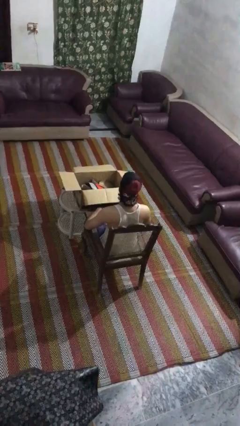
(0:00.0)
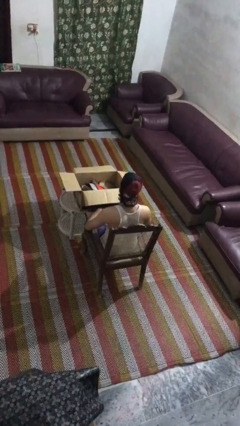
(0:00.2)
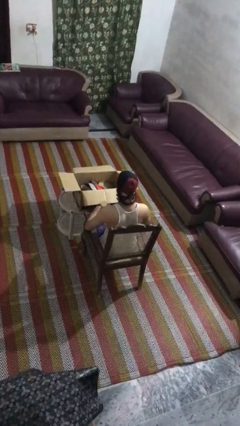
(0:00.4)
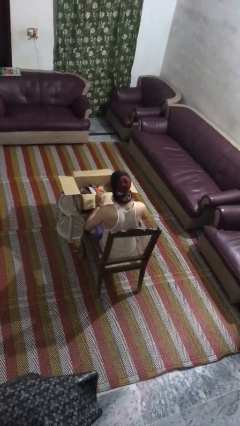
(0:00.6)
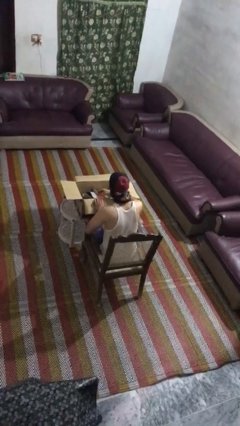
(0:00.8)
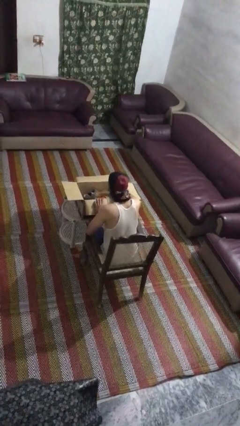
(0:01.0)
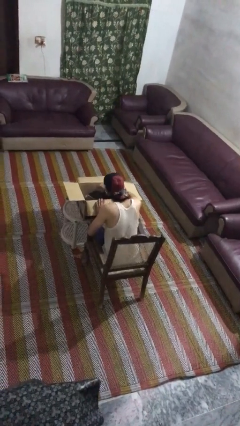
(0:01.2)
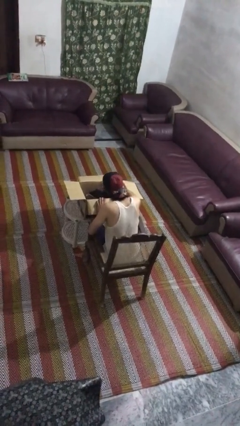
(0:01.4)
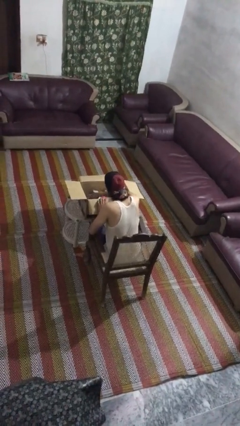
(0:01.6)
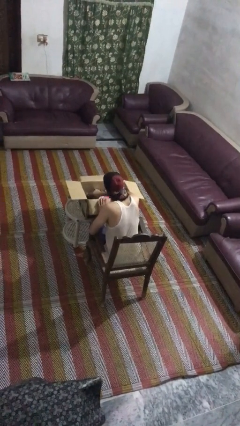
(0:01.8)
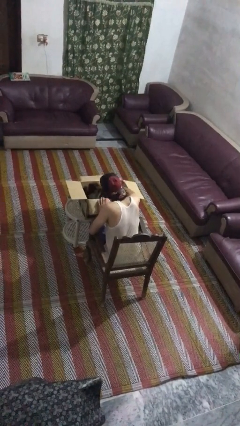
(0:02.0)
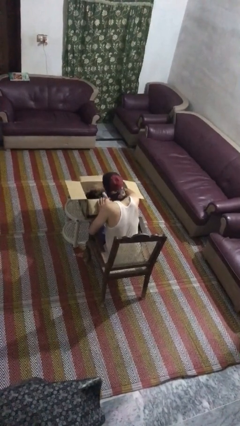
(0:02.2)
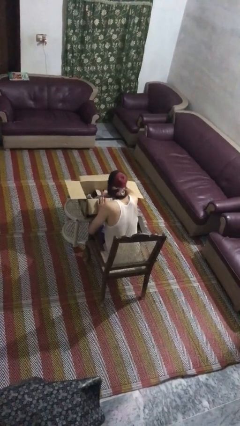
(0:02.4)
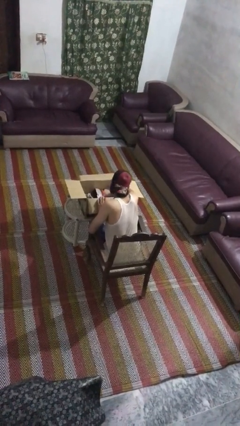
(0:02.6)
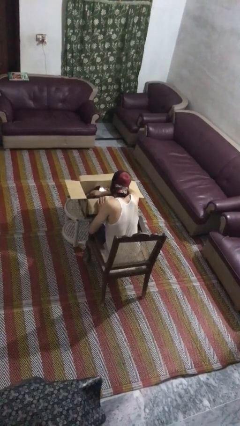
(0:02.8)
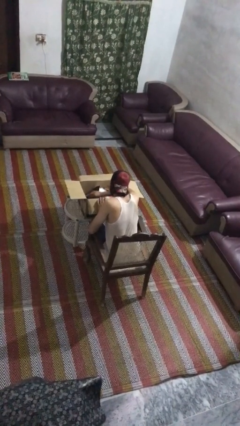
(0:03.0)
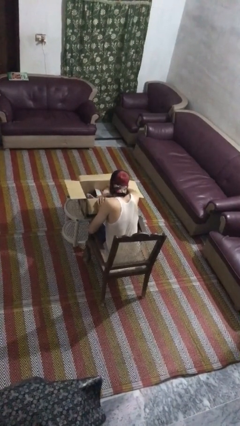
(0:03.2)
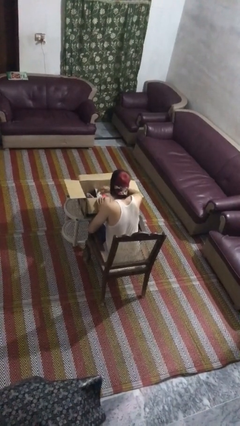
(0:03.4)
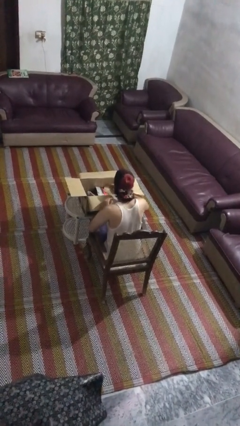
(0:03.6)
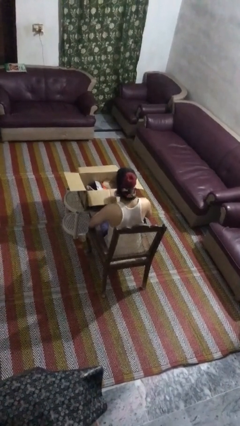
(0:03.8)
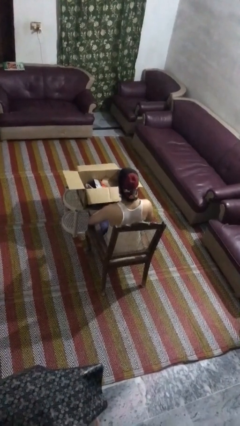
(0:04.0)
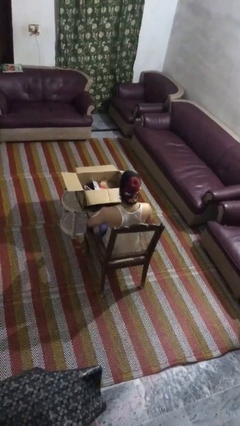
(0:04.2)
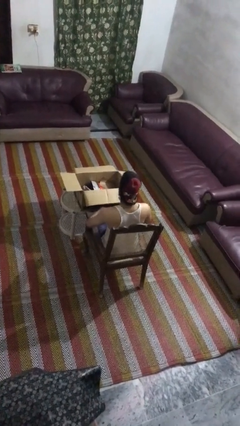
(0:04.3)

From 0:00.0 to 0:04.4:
person searches in box

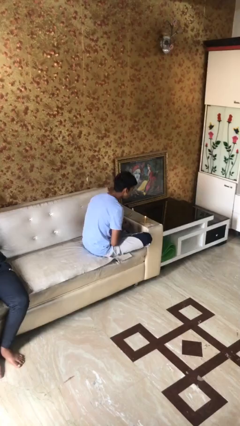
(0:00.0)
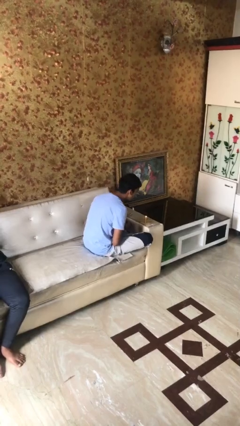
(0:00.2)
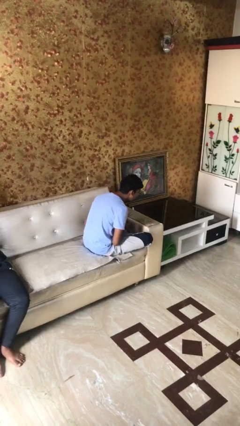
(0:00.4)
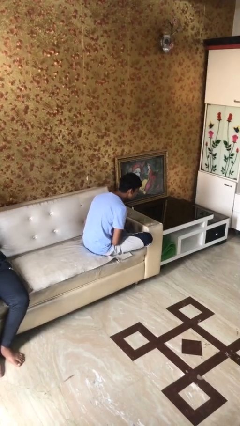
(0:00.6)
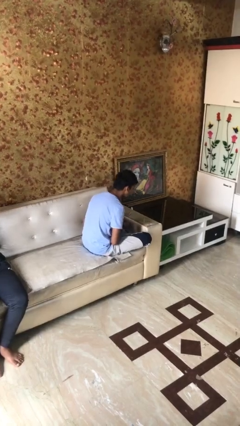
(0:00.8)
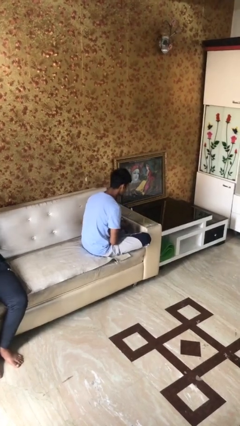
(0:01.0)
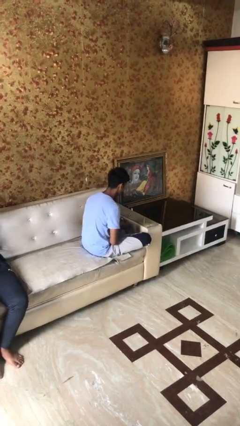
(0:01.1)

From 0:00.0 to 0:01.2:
person extinguishes candle

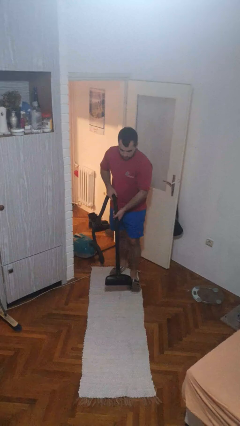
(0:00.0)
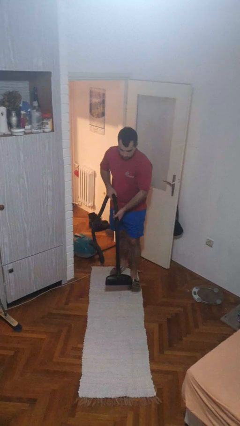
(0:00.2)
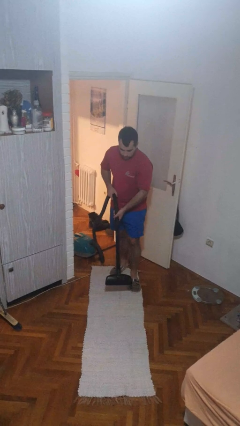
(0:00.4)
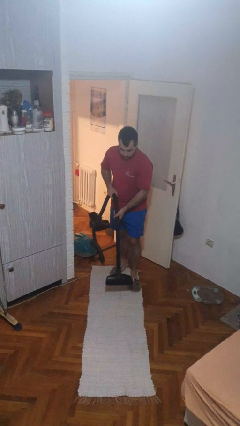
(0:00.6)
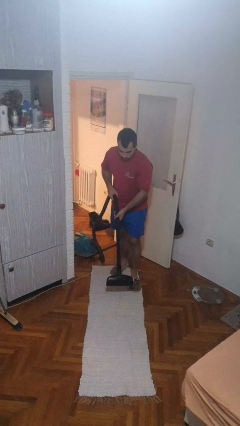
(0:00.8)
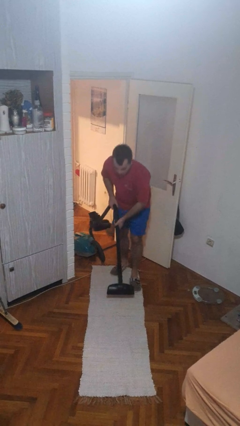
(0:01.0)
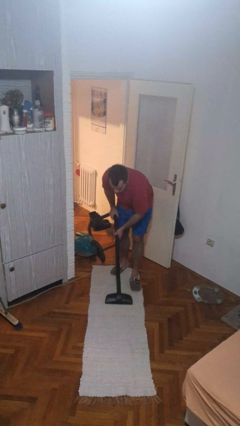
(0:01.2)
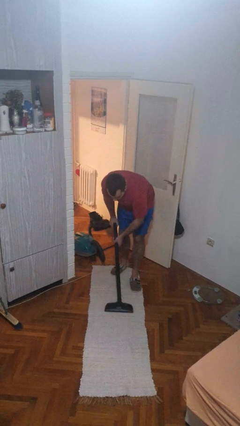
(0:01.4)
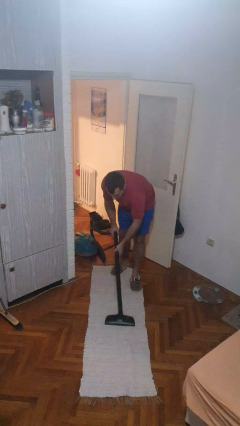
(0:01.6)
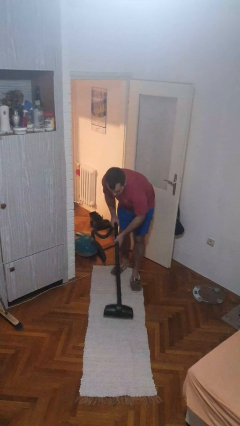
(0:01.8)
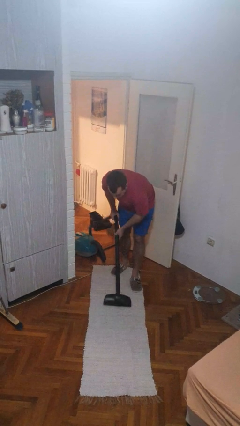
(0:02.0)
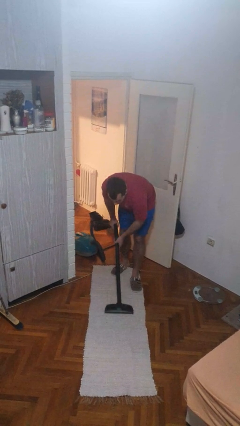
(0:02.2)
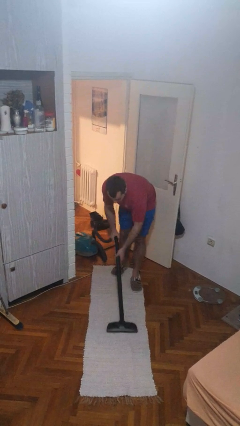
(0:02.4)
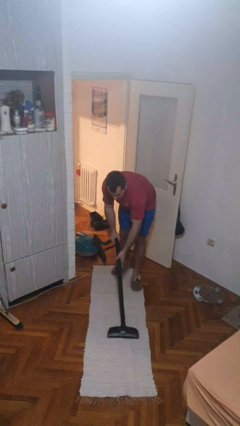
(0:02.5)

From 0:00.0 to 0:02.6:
person vacuums carpet

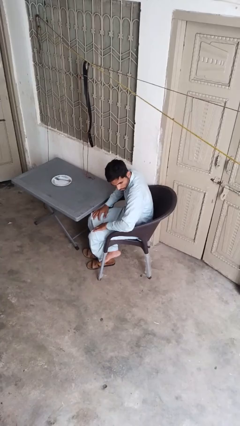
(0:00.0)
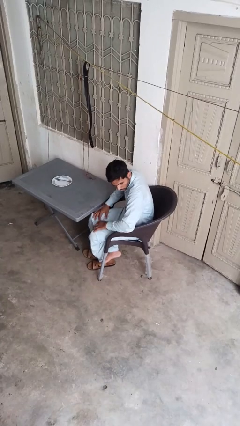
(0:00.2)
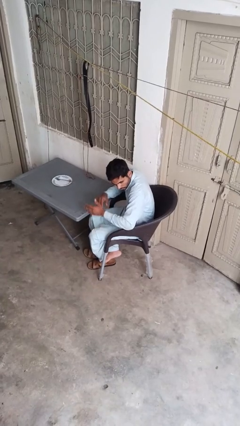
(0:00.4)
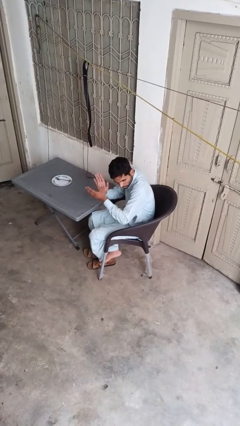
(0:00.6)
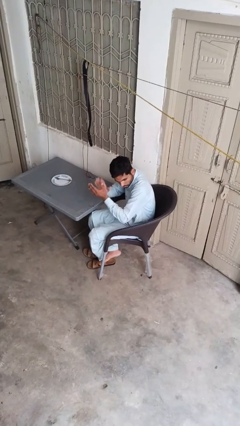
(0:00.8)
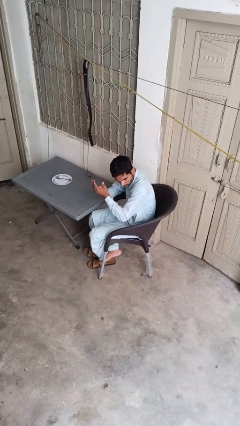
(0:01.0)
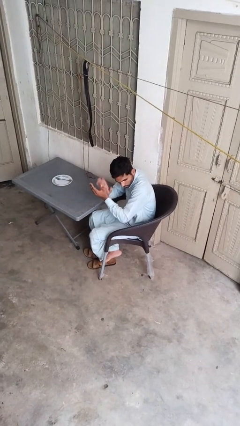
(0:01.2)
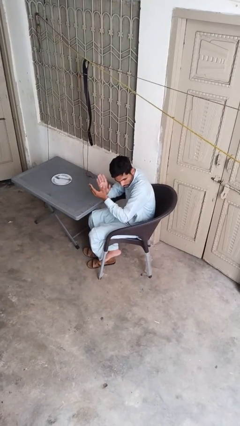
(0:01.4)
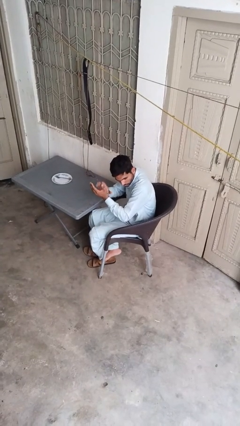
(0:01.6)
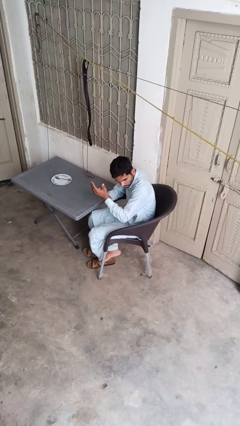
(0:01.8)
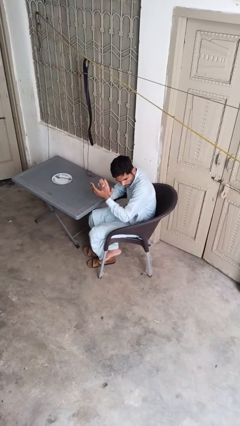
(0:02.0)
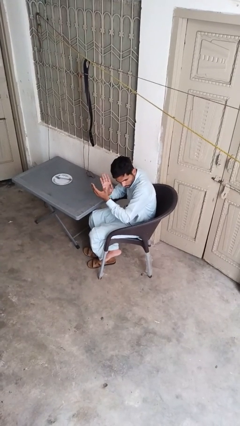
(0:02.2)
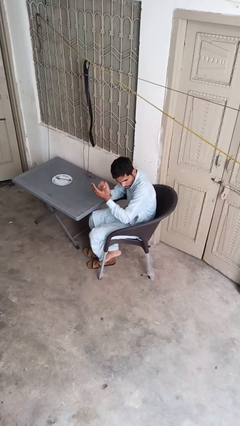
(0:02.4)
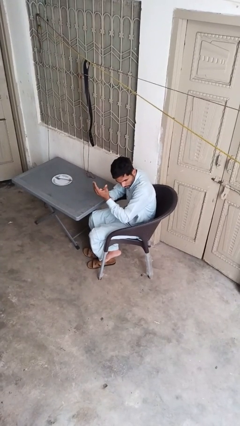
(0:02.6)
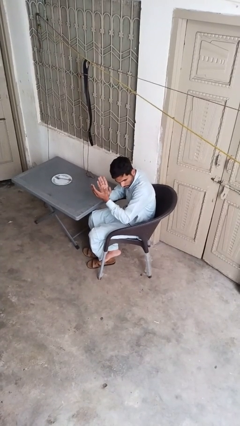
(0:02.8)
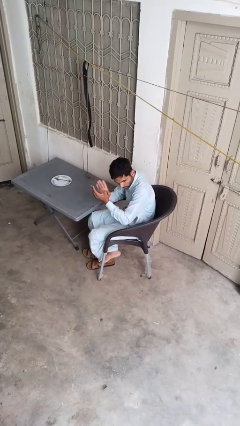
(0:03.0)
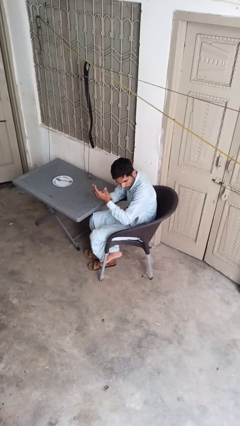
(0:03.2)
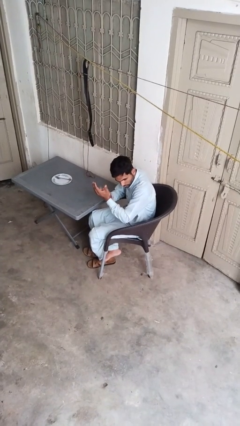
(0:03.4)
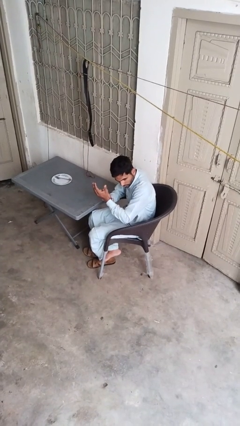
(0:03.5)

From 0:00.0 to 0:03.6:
person claps hands

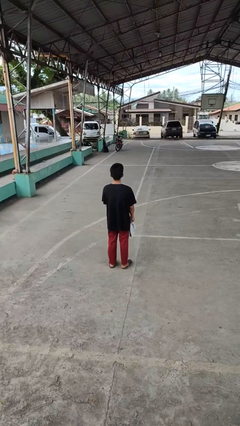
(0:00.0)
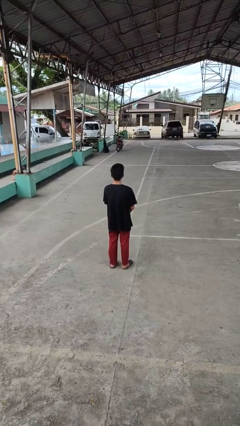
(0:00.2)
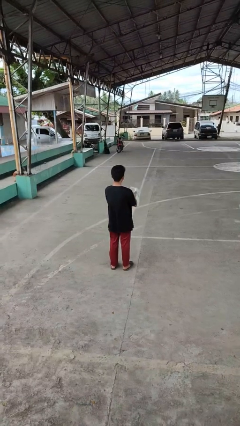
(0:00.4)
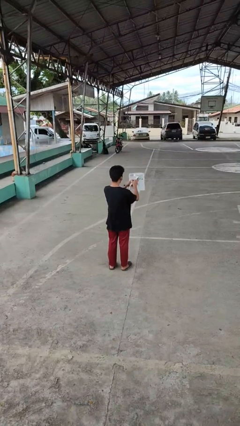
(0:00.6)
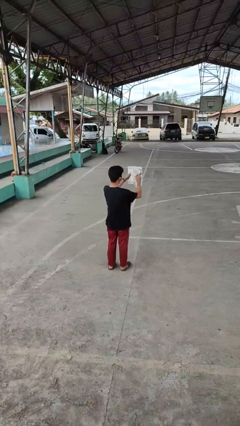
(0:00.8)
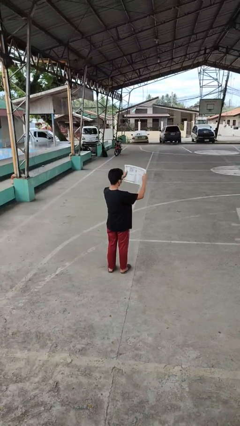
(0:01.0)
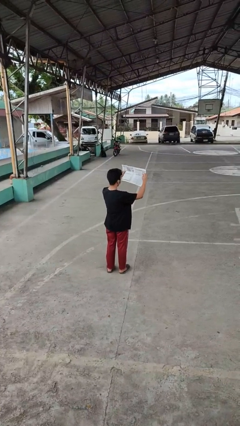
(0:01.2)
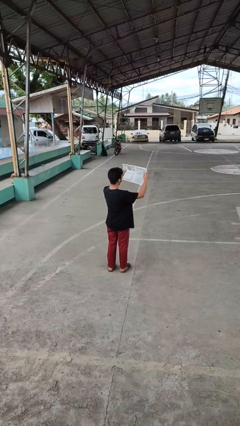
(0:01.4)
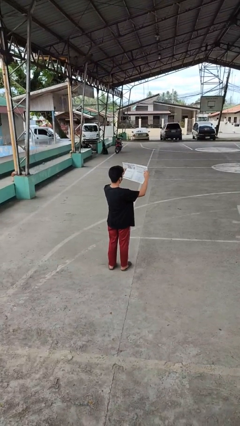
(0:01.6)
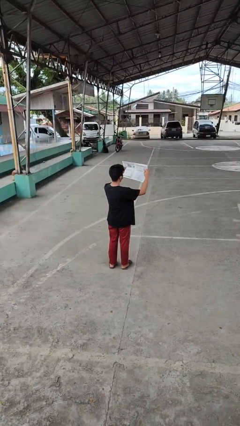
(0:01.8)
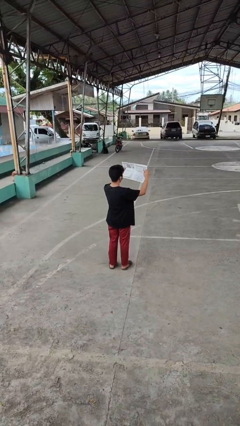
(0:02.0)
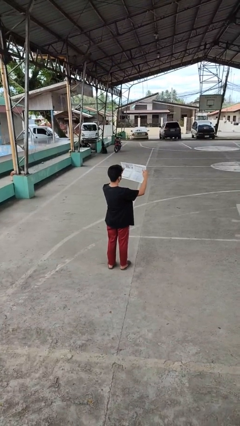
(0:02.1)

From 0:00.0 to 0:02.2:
person reads newspaper

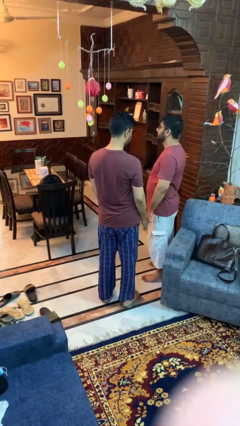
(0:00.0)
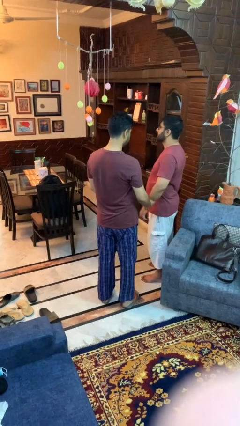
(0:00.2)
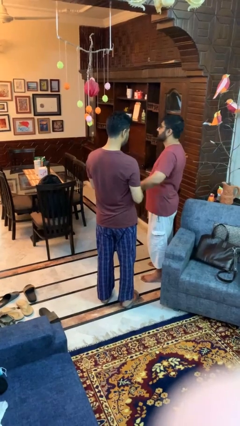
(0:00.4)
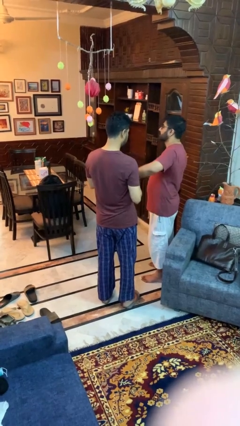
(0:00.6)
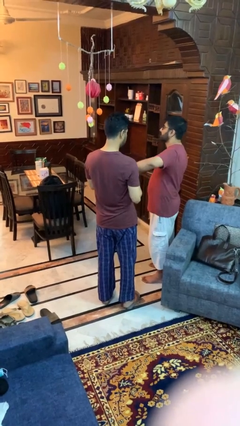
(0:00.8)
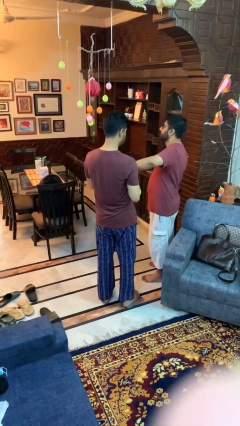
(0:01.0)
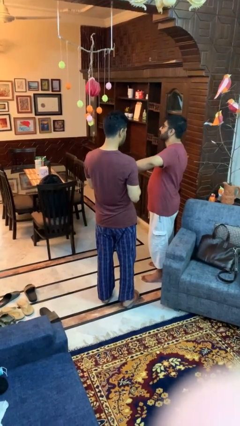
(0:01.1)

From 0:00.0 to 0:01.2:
person grabs person by forearm

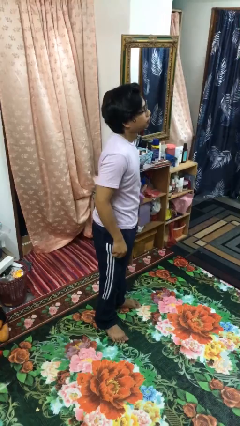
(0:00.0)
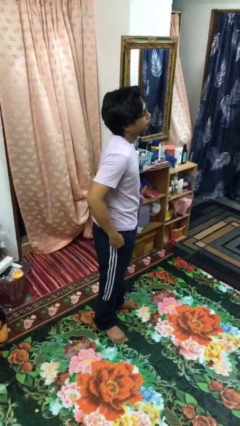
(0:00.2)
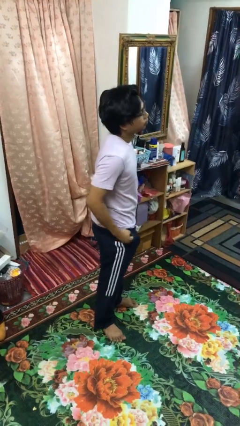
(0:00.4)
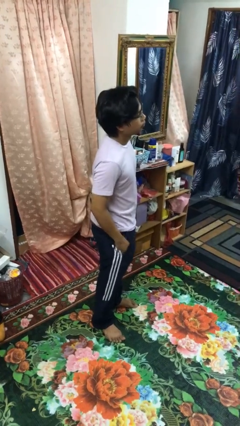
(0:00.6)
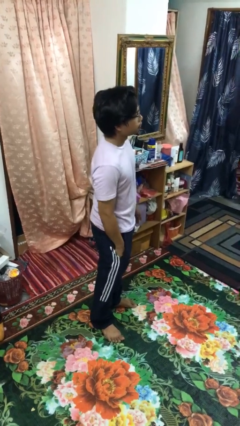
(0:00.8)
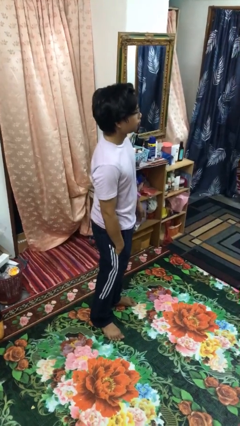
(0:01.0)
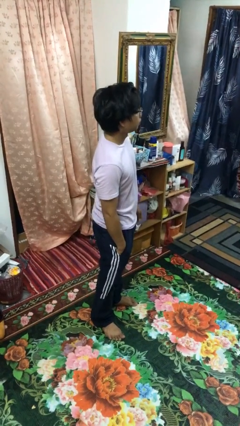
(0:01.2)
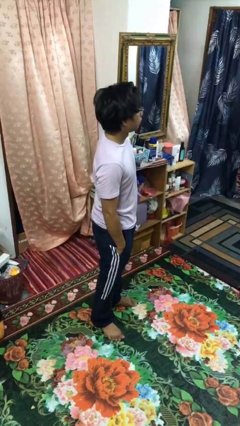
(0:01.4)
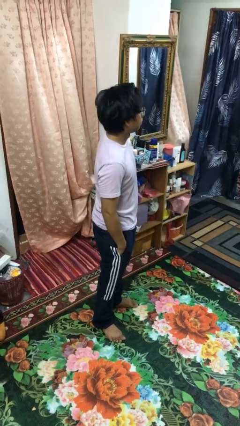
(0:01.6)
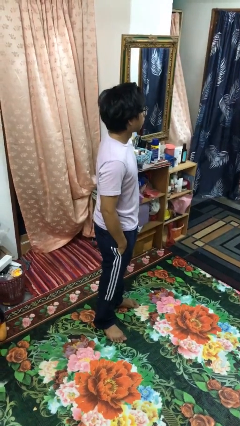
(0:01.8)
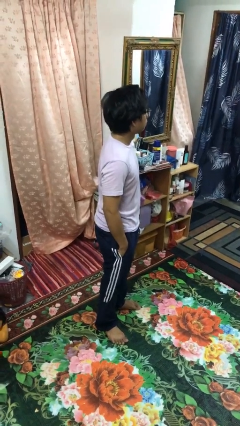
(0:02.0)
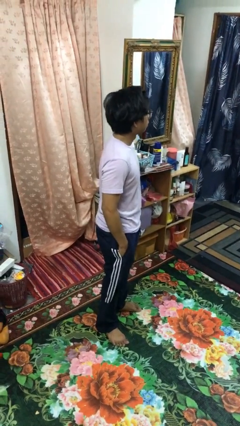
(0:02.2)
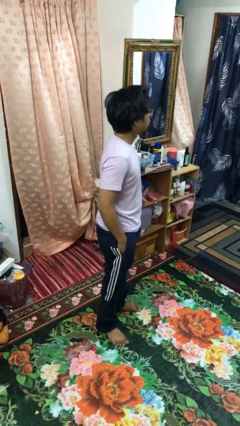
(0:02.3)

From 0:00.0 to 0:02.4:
person puts hands in back pockets
